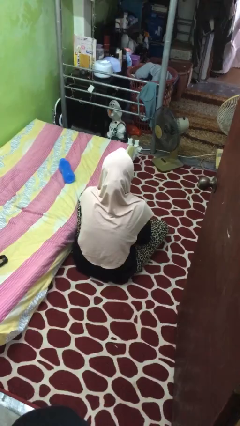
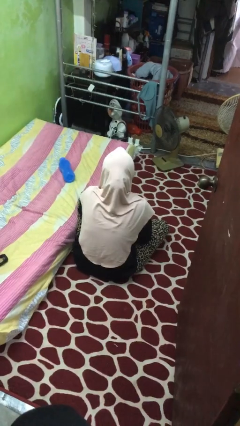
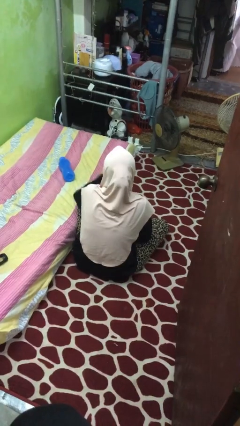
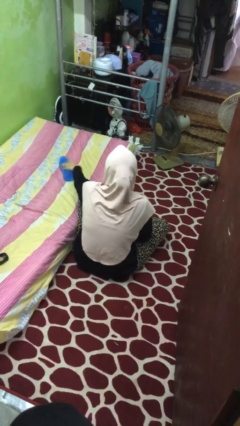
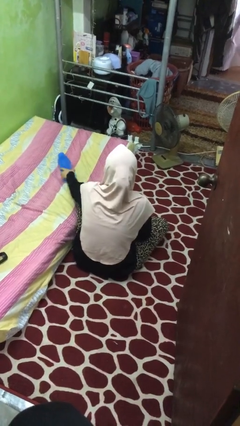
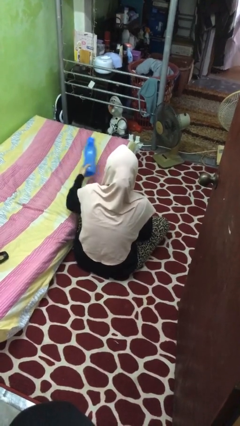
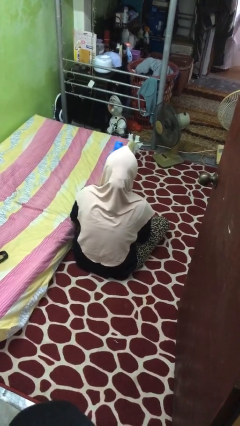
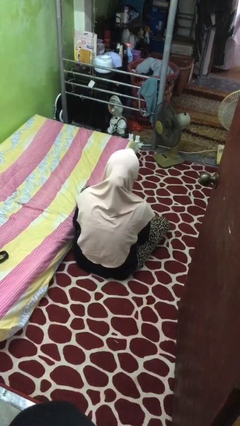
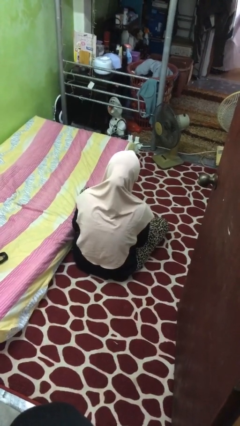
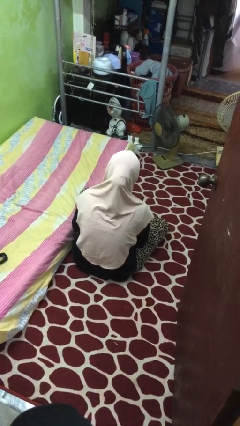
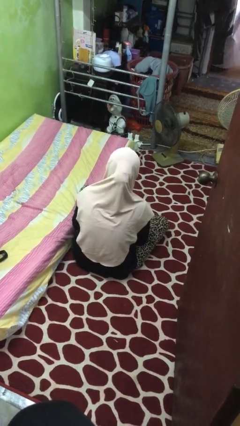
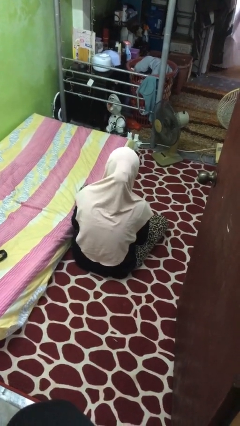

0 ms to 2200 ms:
person picks up object from bed

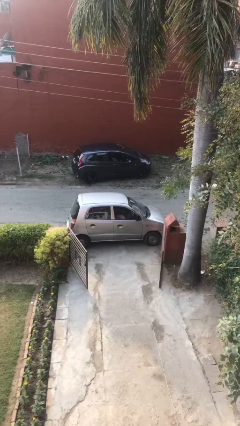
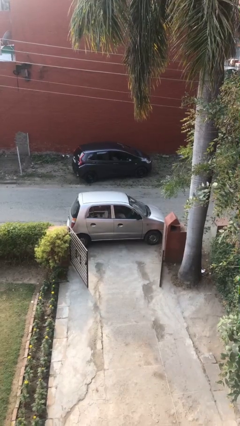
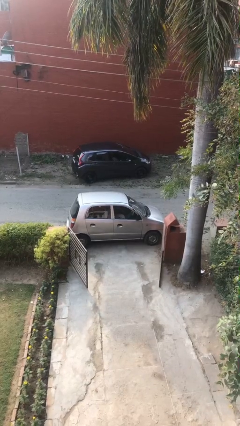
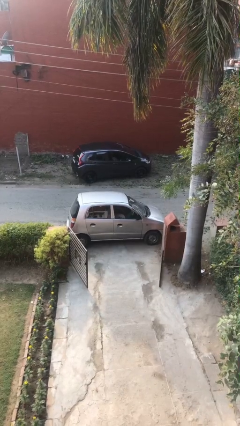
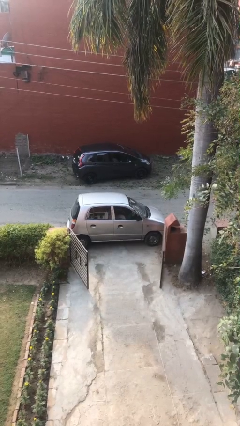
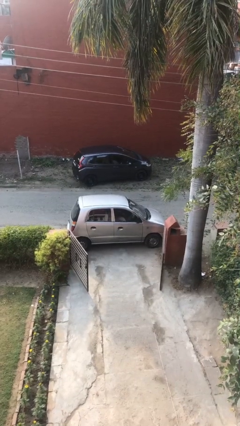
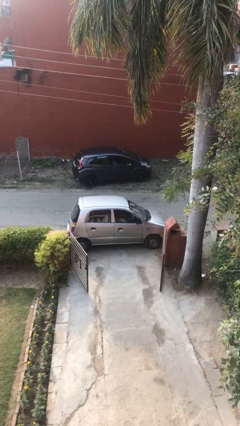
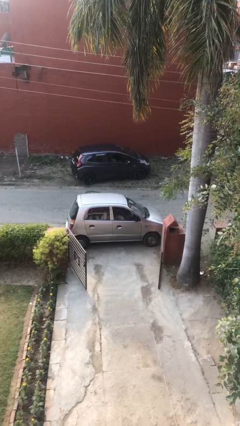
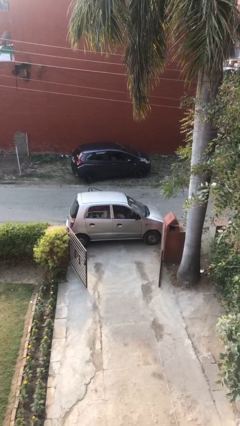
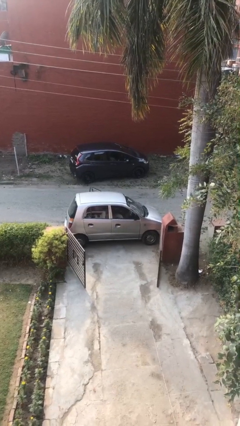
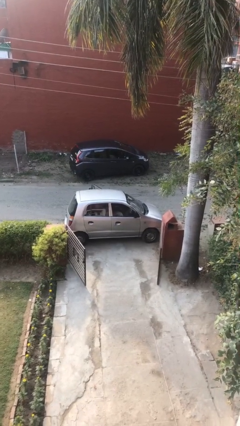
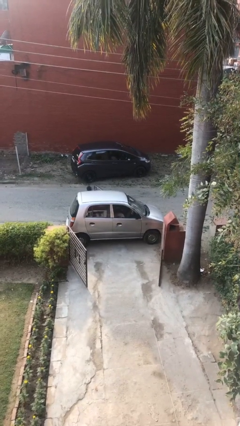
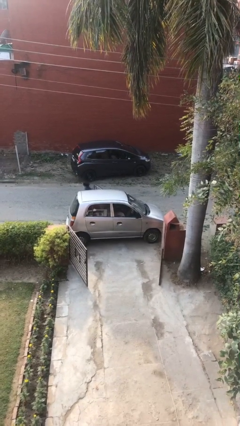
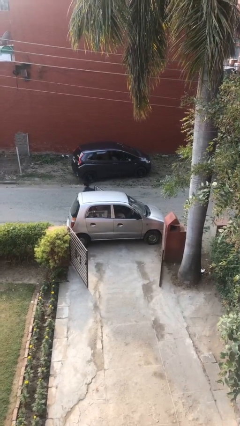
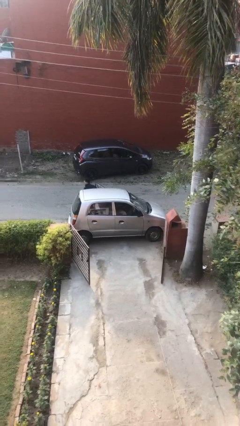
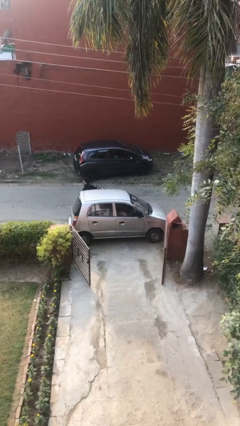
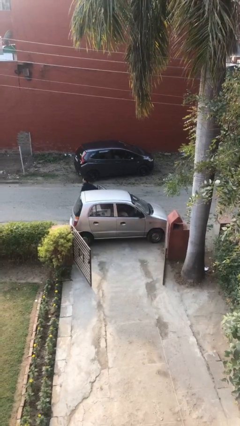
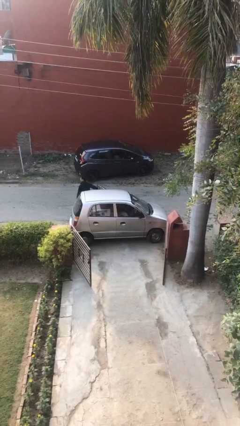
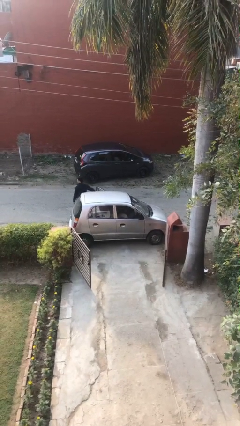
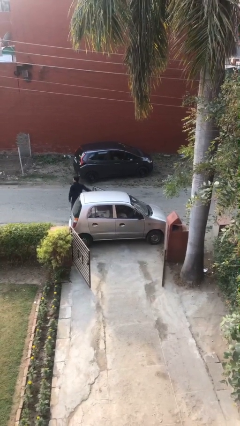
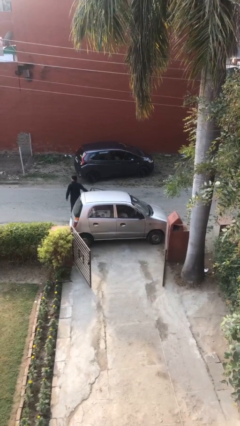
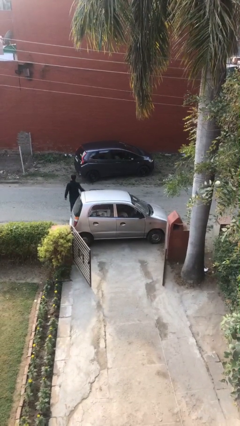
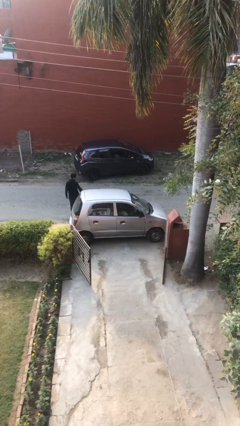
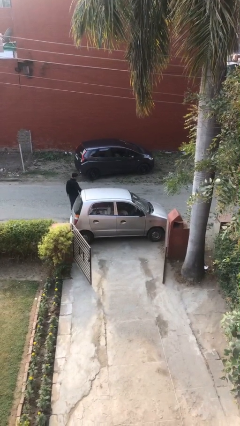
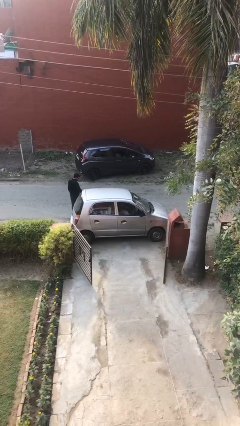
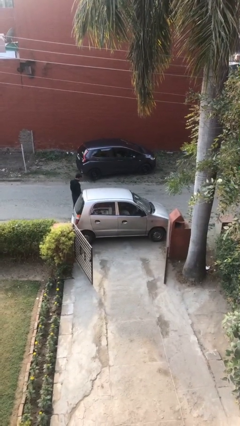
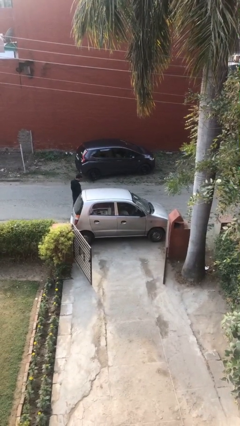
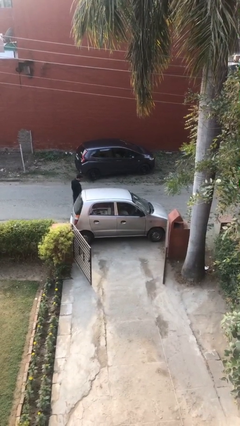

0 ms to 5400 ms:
car drops off person

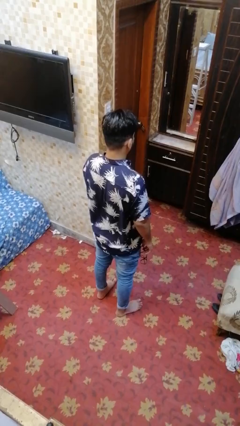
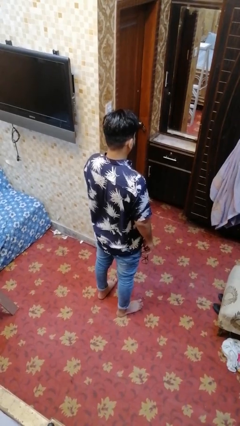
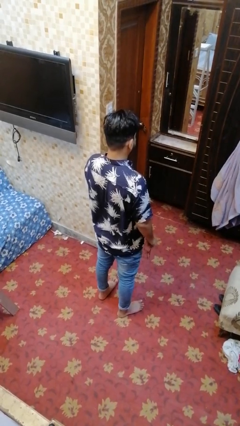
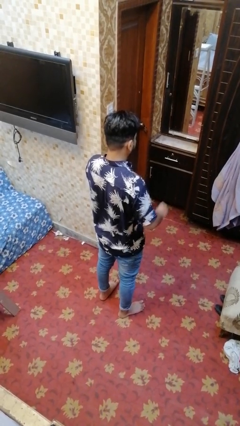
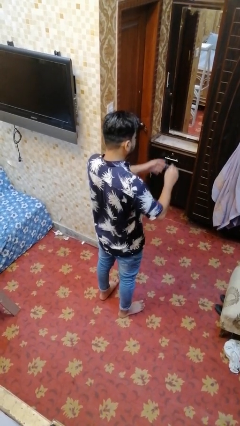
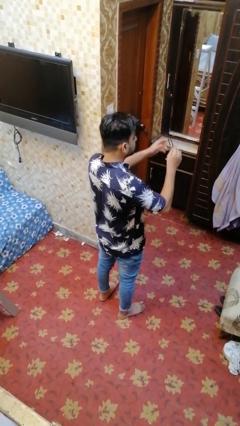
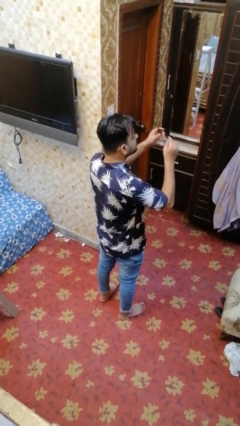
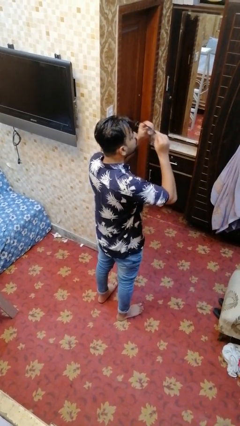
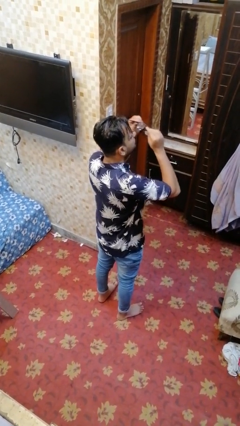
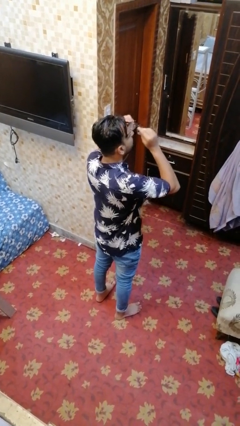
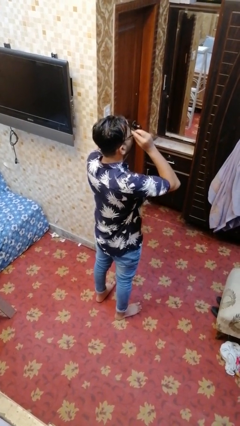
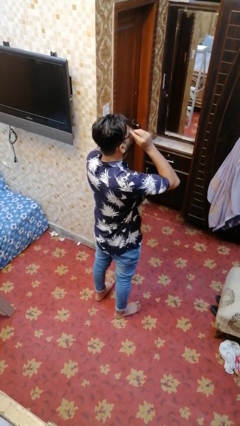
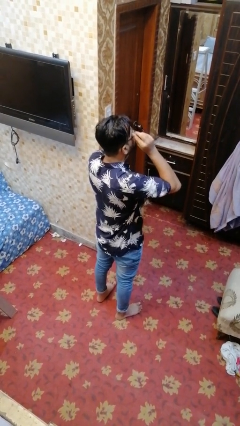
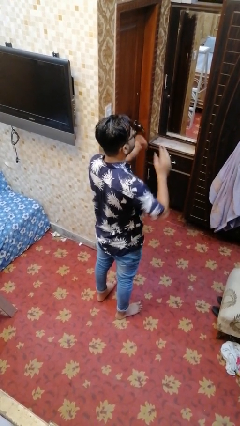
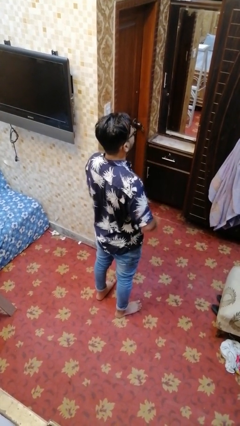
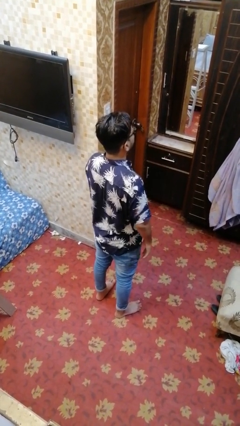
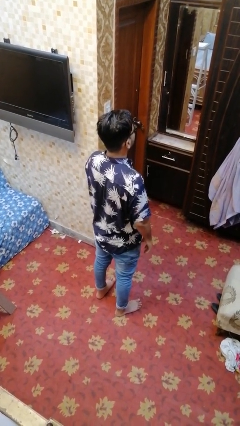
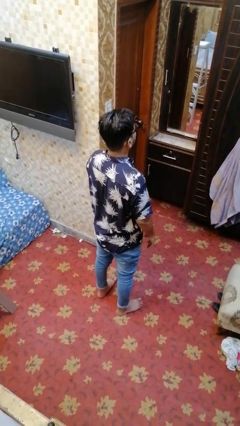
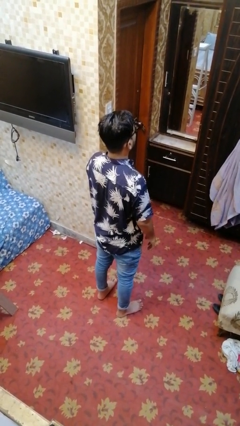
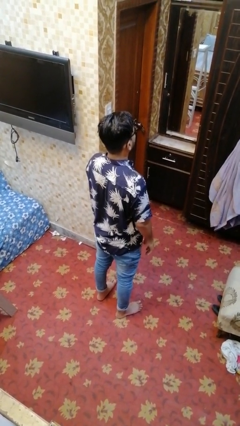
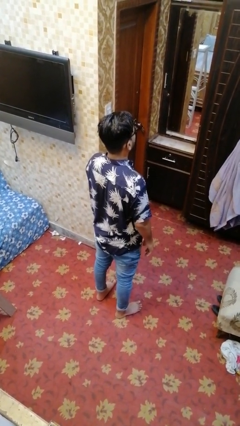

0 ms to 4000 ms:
person puts on glasses

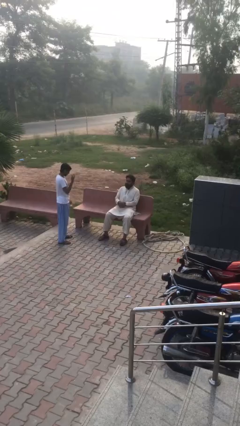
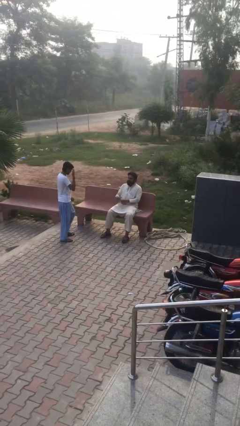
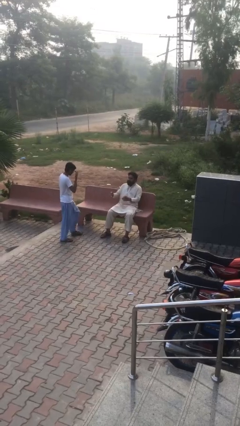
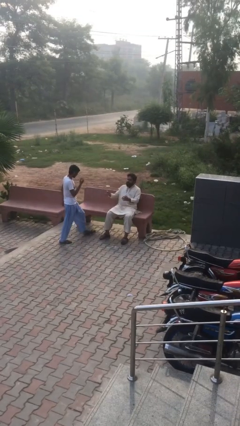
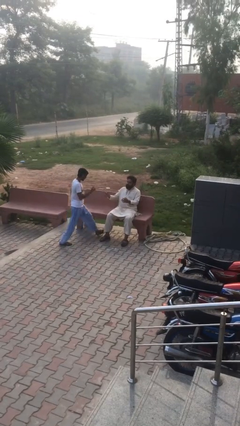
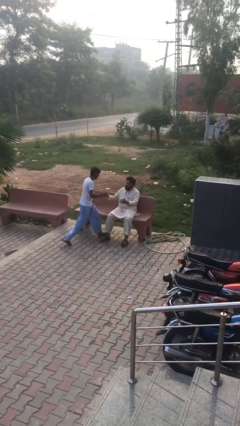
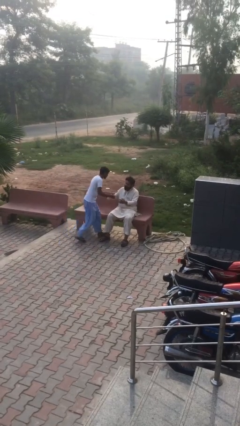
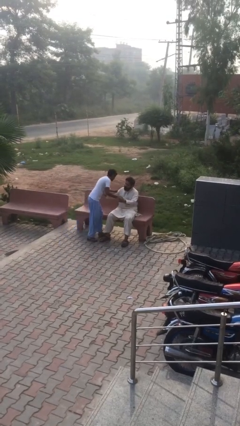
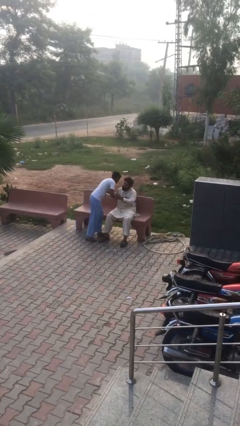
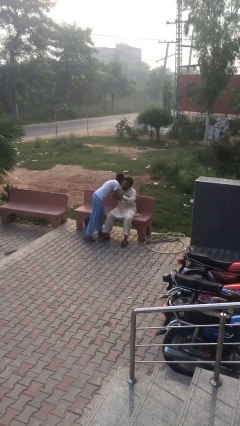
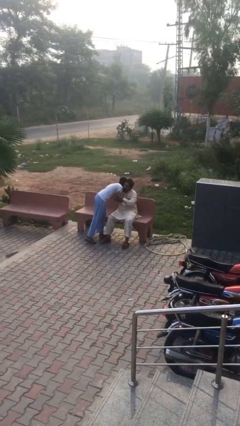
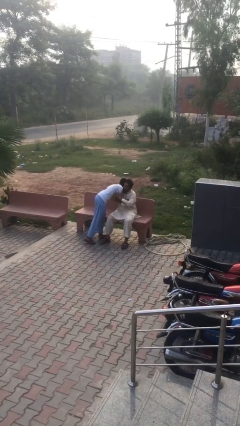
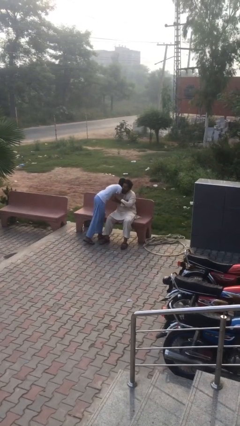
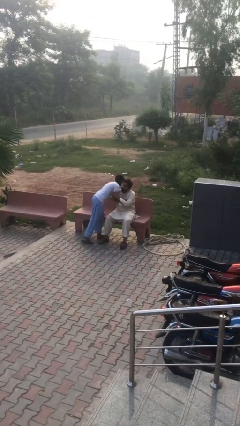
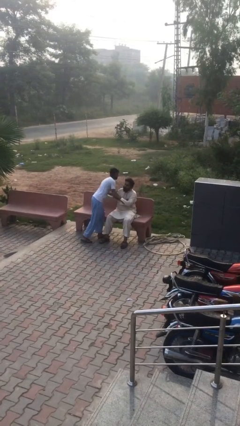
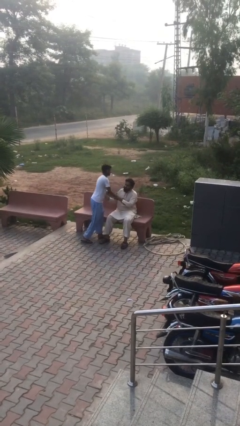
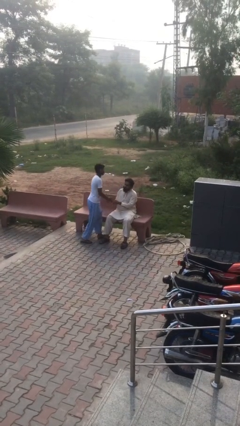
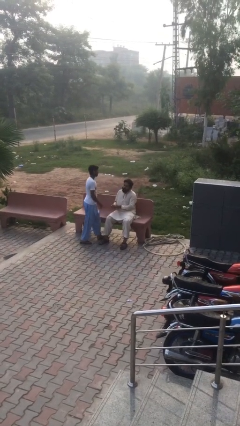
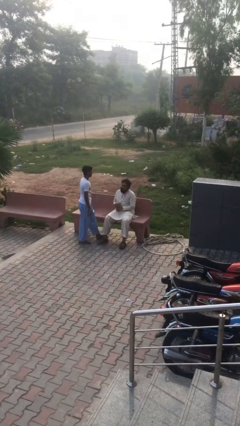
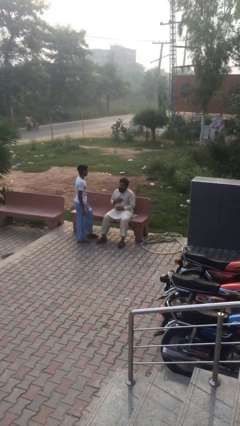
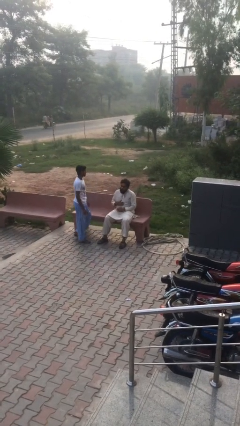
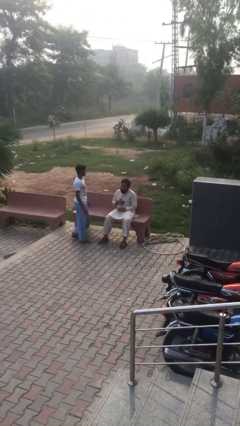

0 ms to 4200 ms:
person embraces person

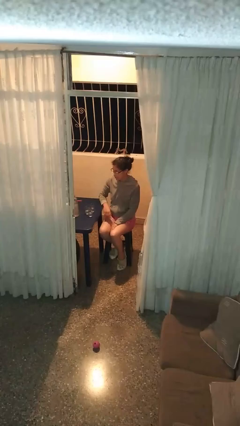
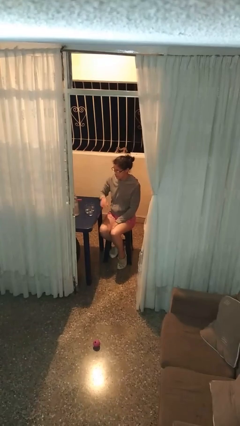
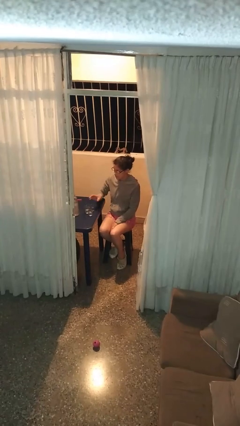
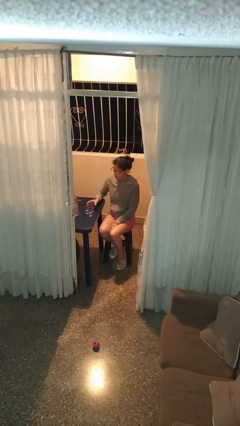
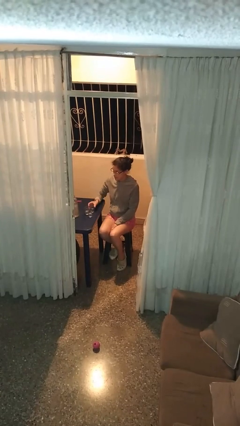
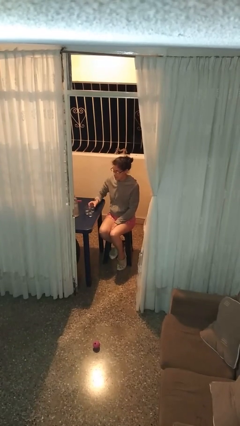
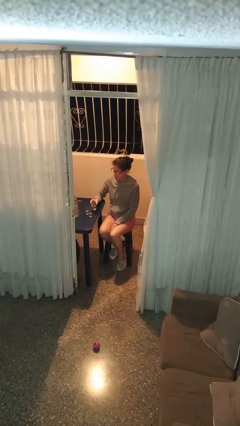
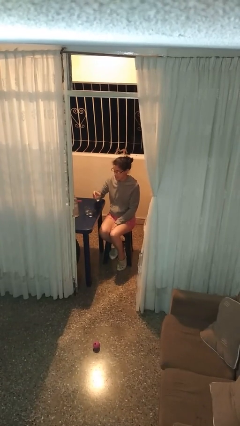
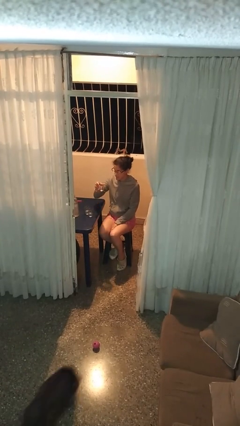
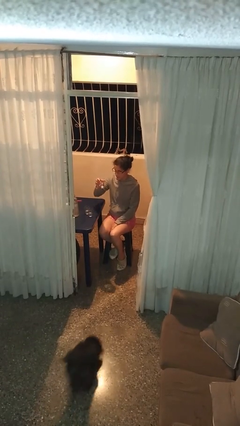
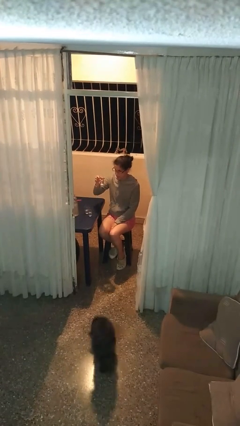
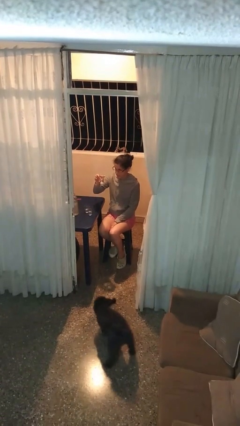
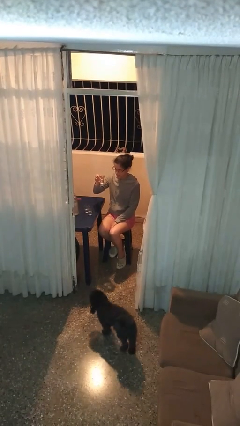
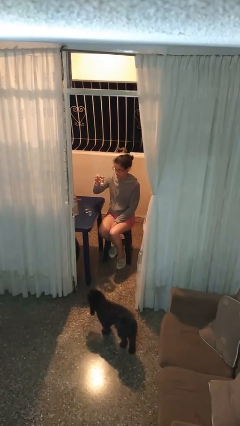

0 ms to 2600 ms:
person picks up object from table
